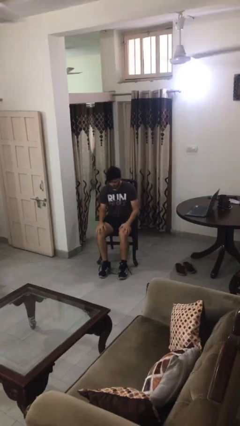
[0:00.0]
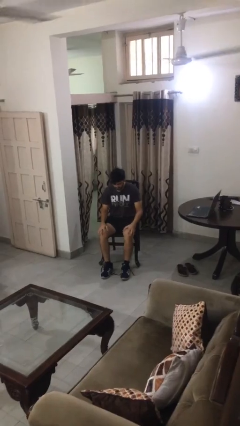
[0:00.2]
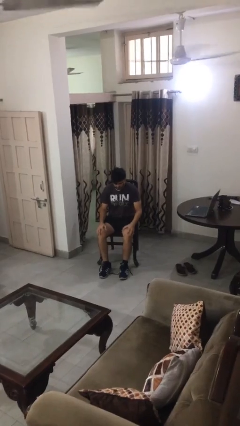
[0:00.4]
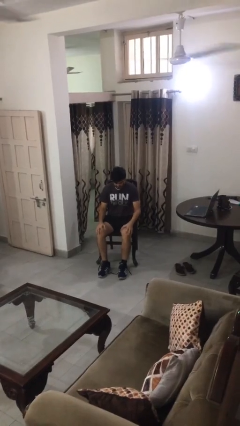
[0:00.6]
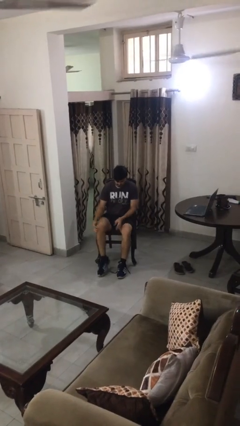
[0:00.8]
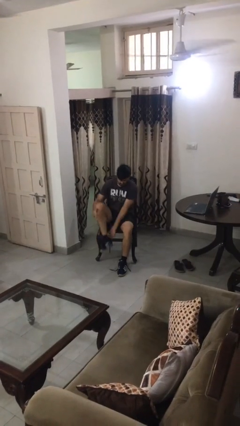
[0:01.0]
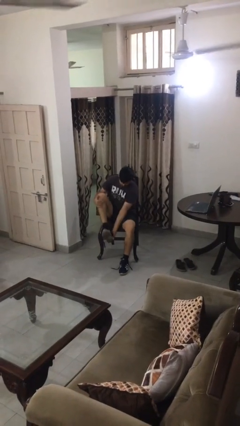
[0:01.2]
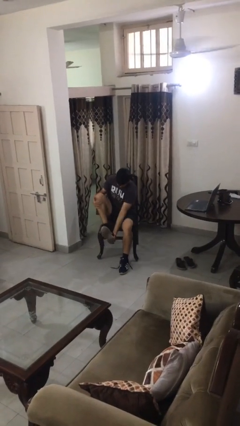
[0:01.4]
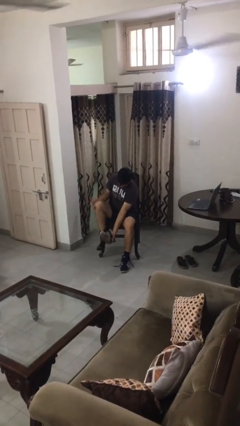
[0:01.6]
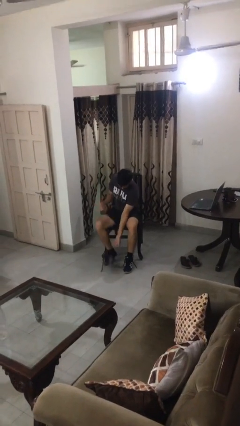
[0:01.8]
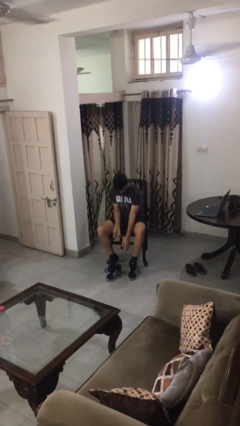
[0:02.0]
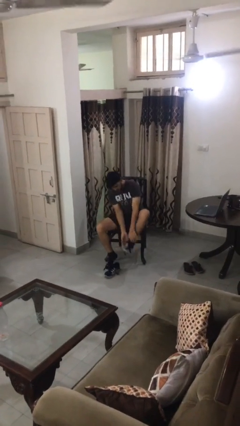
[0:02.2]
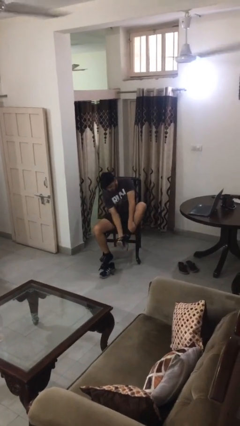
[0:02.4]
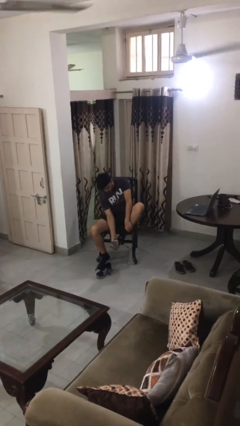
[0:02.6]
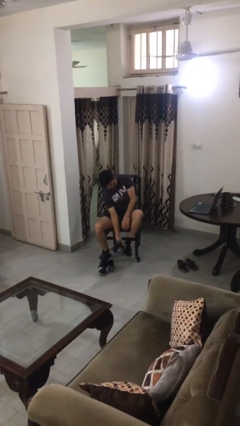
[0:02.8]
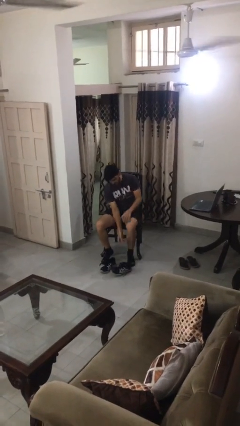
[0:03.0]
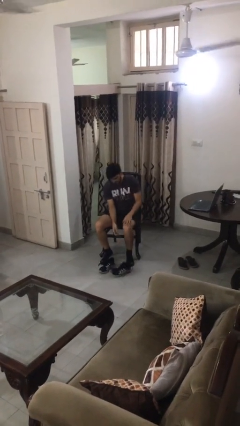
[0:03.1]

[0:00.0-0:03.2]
person takes off shoes

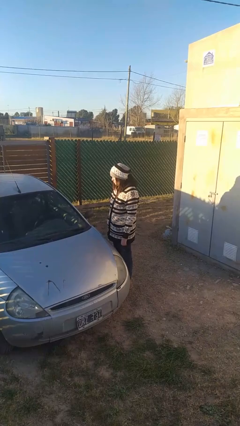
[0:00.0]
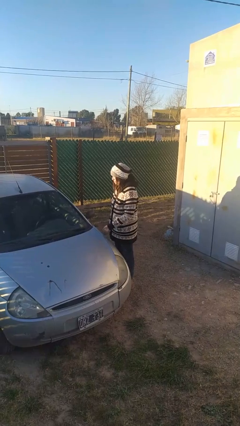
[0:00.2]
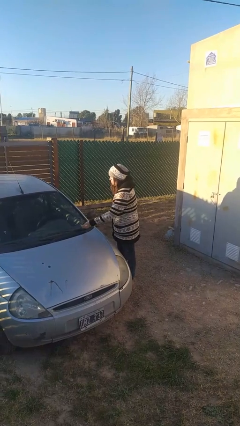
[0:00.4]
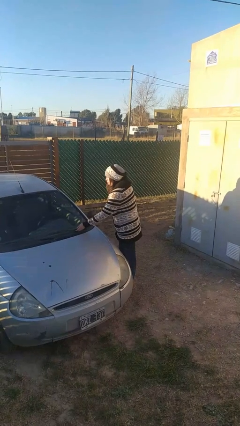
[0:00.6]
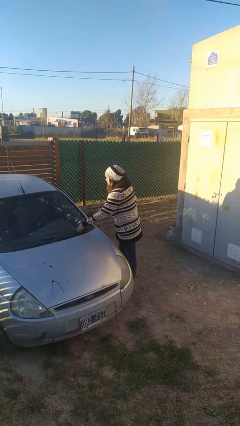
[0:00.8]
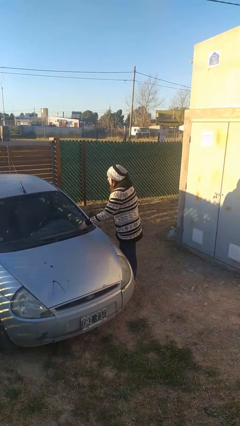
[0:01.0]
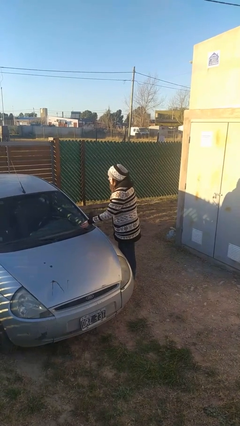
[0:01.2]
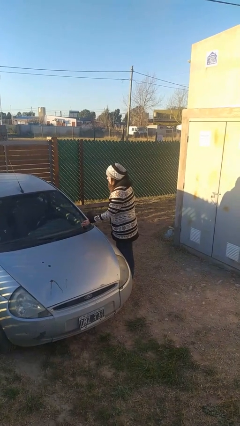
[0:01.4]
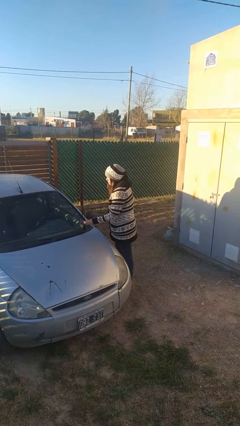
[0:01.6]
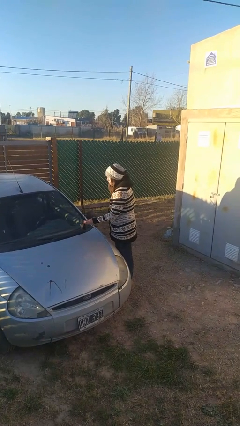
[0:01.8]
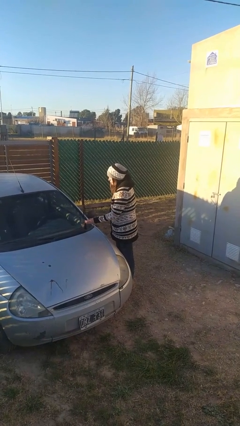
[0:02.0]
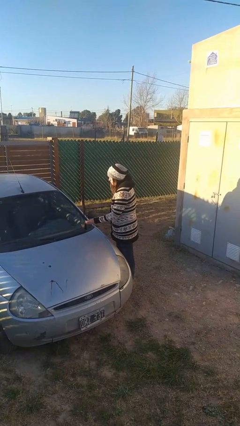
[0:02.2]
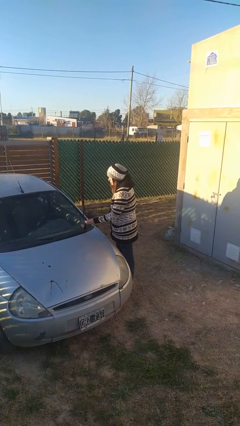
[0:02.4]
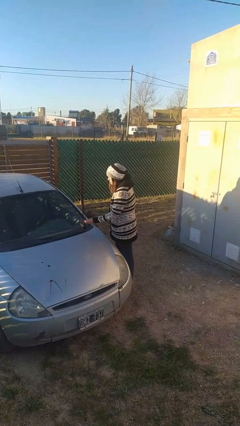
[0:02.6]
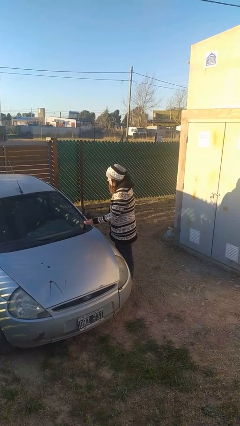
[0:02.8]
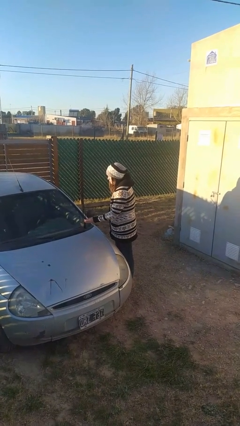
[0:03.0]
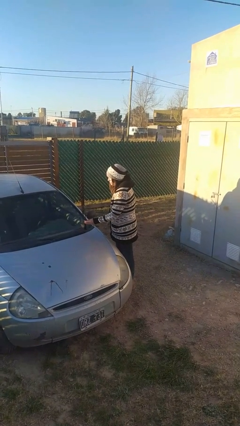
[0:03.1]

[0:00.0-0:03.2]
person flips up car wipers

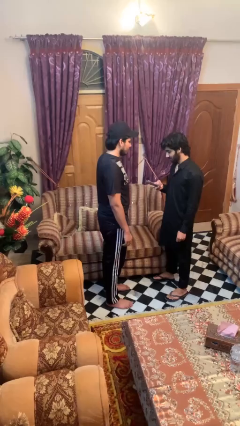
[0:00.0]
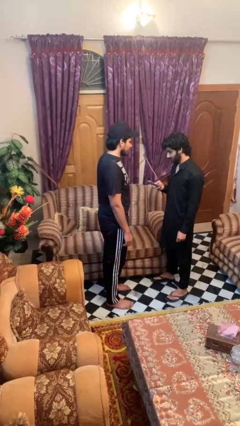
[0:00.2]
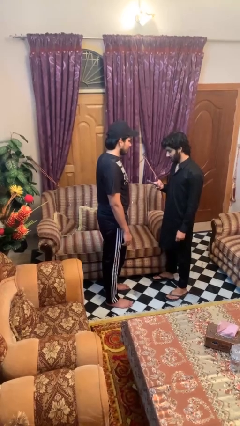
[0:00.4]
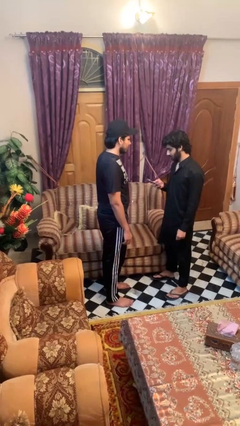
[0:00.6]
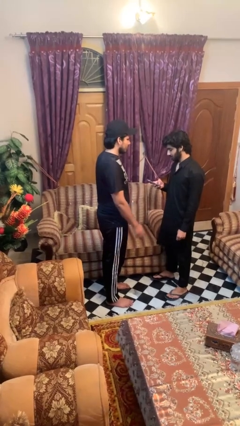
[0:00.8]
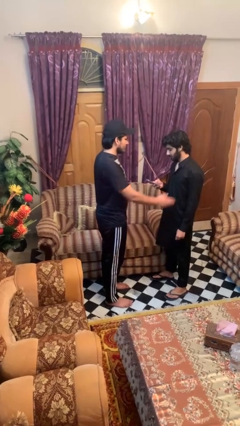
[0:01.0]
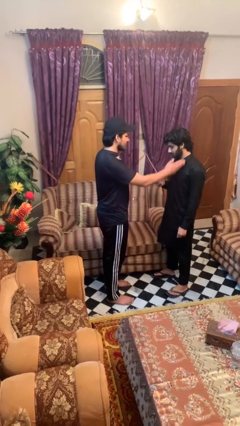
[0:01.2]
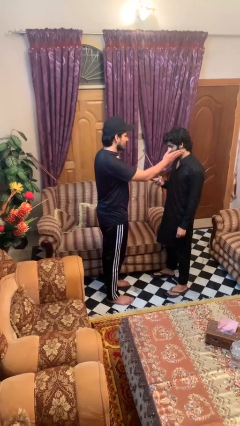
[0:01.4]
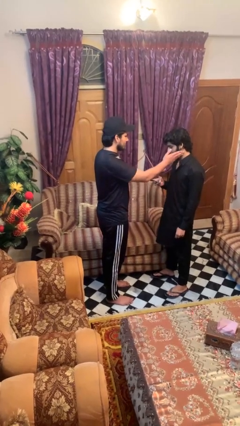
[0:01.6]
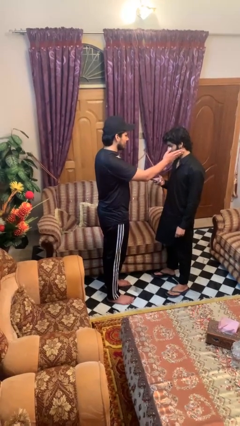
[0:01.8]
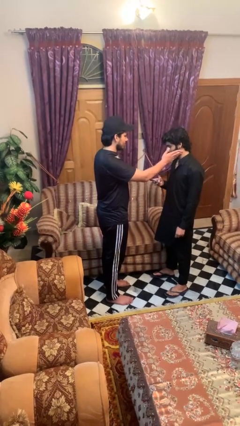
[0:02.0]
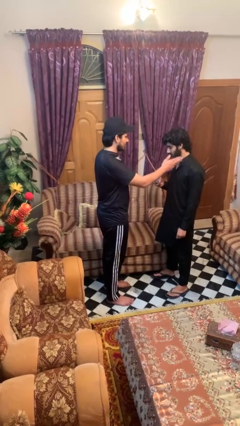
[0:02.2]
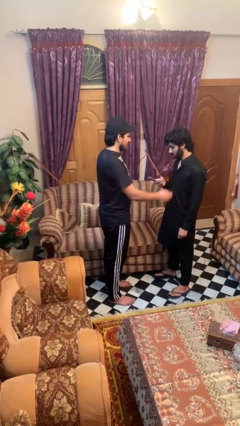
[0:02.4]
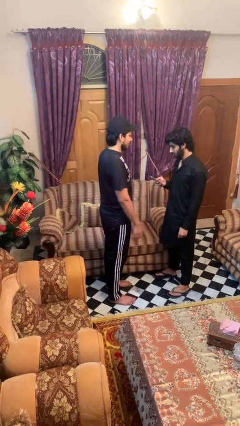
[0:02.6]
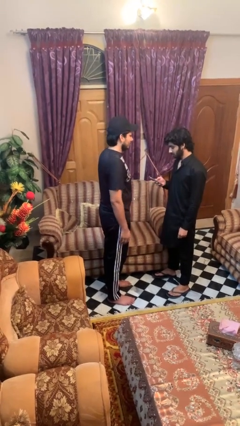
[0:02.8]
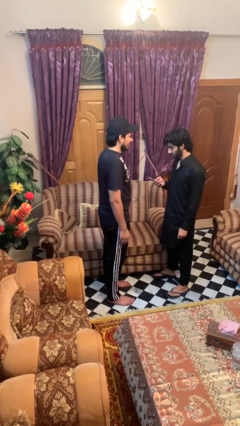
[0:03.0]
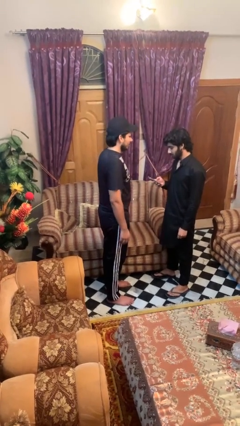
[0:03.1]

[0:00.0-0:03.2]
person touches face of person

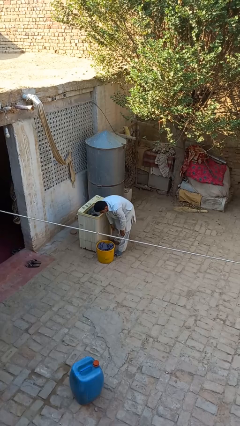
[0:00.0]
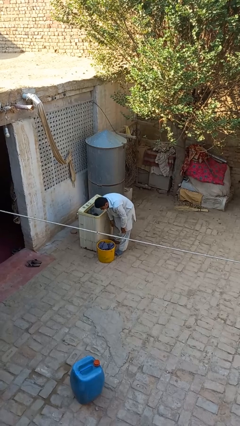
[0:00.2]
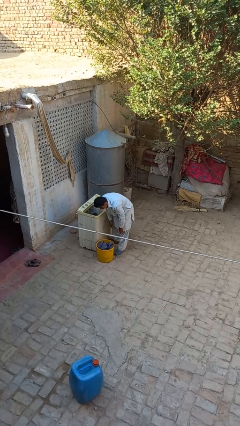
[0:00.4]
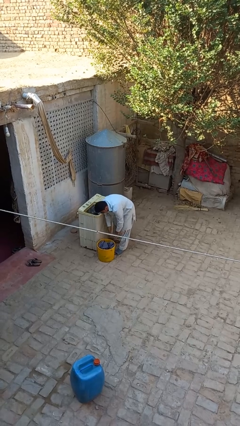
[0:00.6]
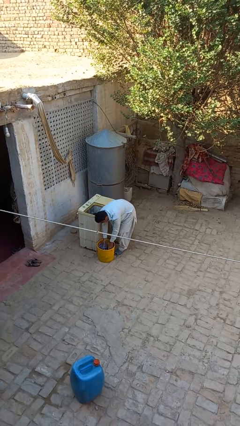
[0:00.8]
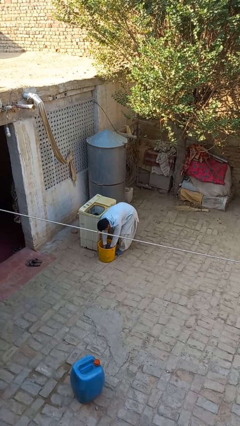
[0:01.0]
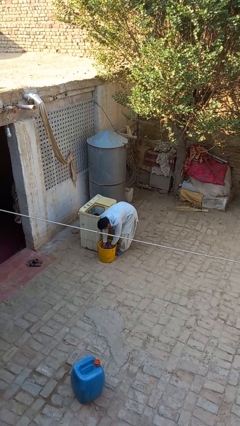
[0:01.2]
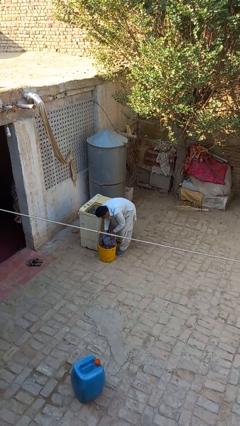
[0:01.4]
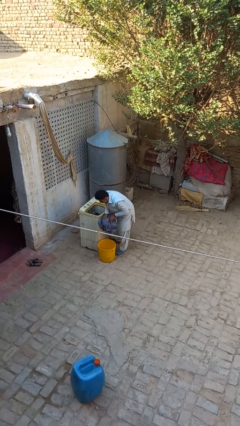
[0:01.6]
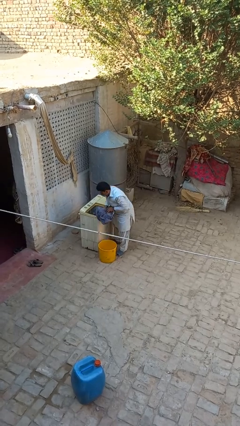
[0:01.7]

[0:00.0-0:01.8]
person loads clotheswasher

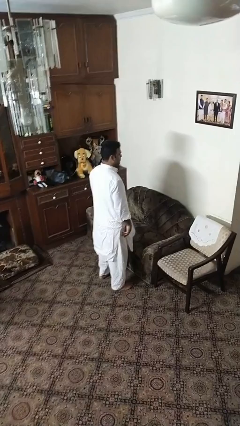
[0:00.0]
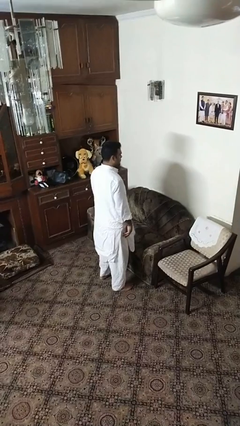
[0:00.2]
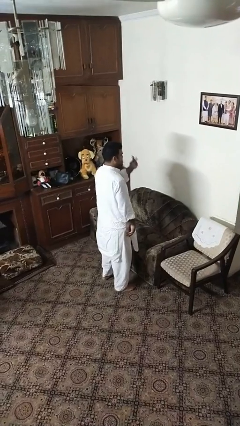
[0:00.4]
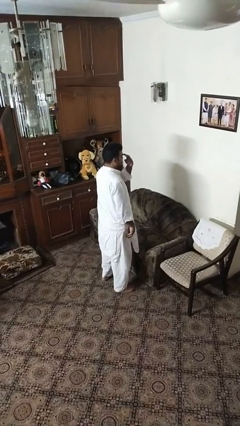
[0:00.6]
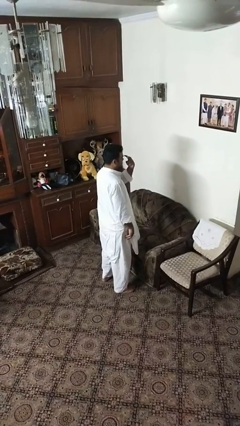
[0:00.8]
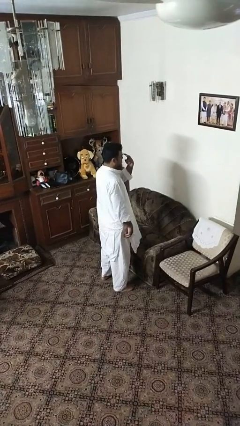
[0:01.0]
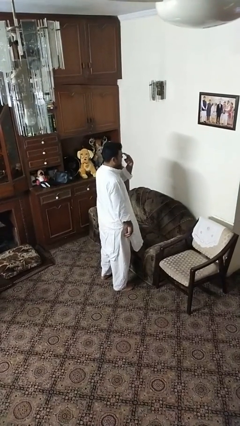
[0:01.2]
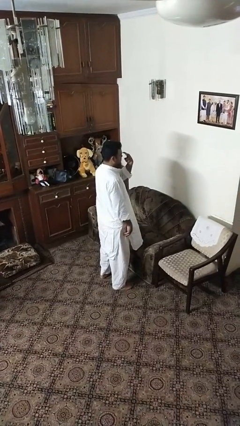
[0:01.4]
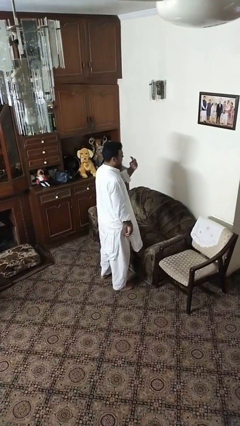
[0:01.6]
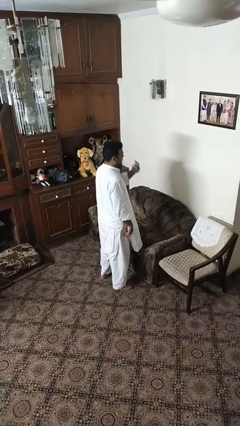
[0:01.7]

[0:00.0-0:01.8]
person gestures watch closely

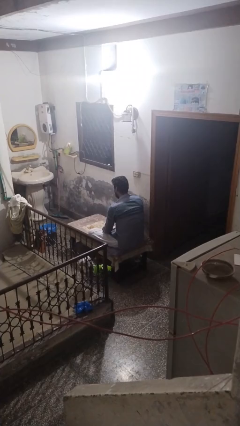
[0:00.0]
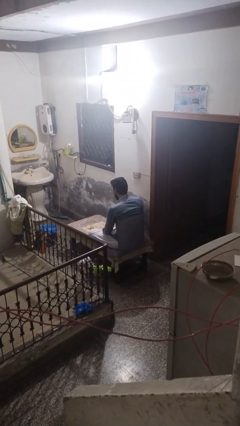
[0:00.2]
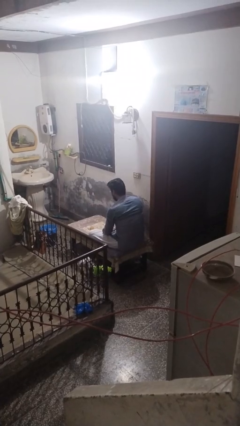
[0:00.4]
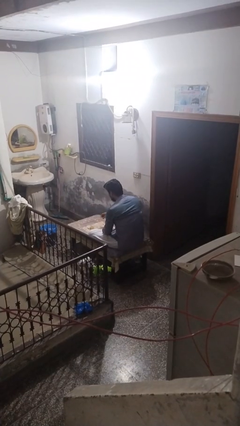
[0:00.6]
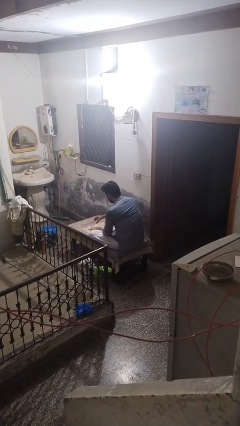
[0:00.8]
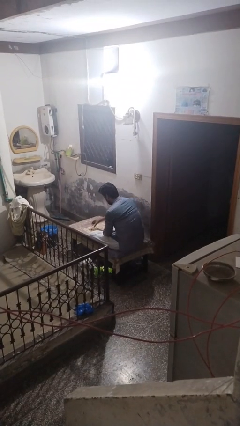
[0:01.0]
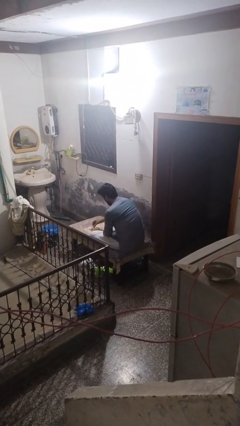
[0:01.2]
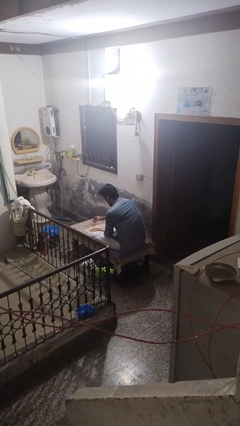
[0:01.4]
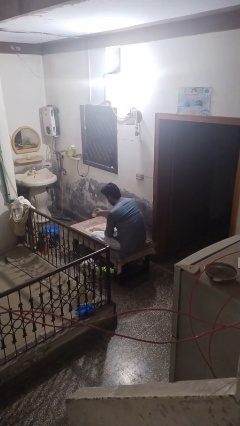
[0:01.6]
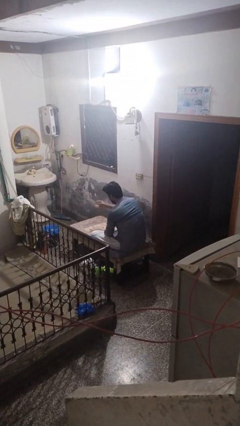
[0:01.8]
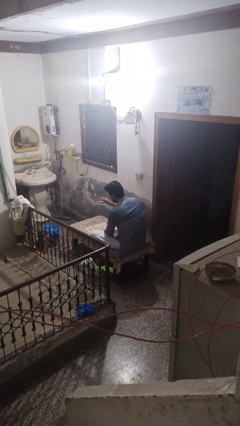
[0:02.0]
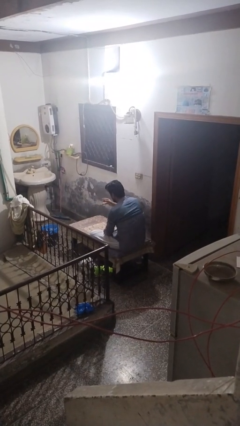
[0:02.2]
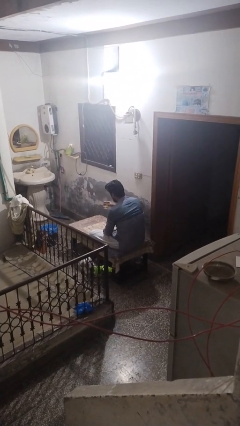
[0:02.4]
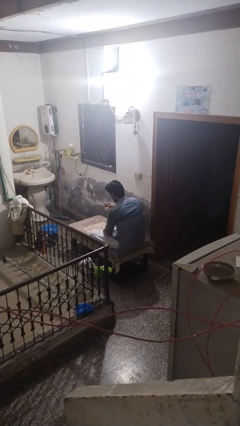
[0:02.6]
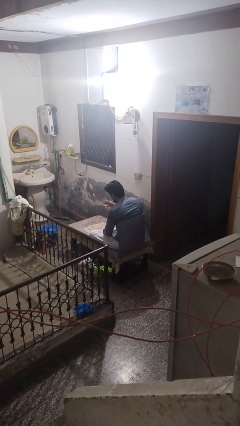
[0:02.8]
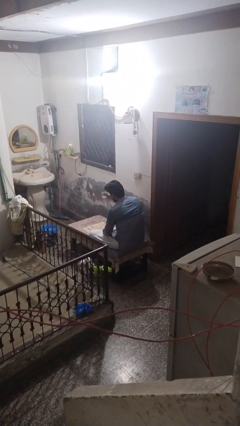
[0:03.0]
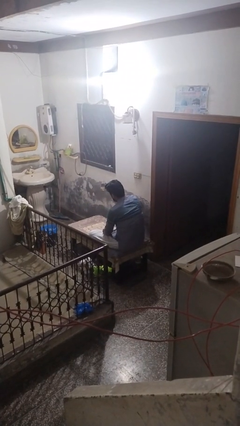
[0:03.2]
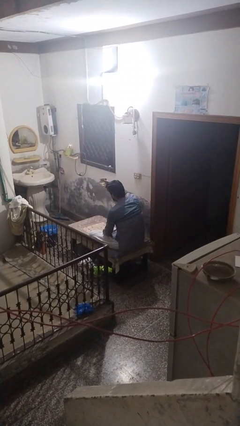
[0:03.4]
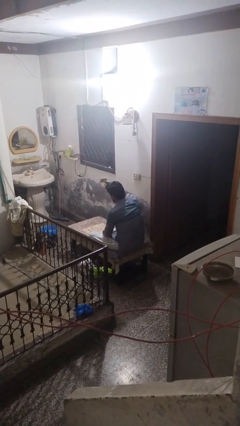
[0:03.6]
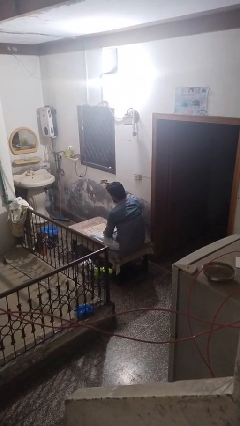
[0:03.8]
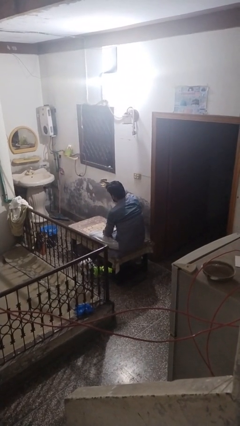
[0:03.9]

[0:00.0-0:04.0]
person picks up object from table
